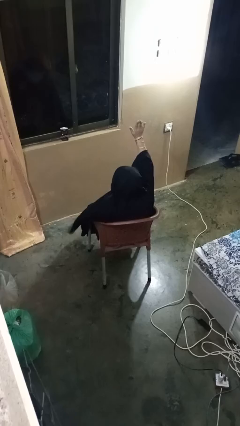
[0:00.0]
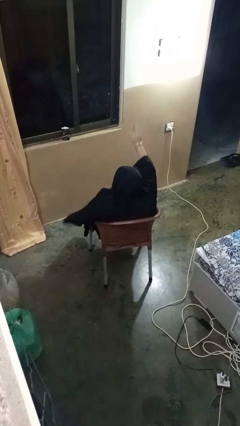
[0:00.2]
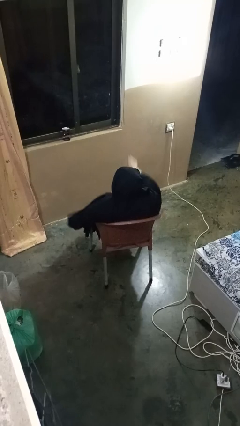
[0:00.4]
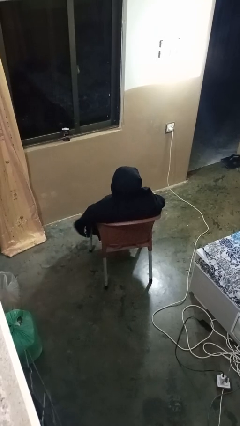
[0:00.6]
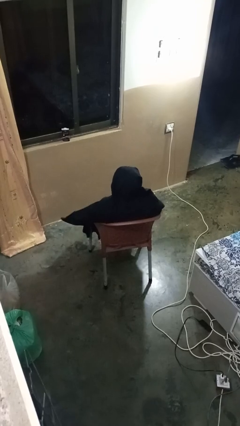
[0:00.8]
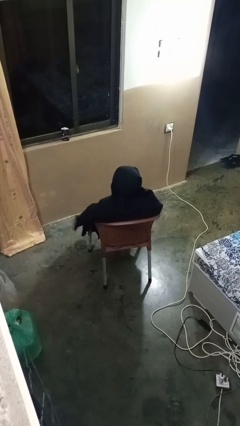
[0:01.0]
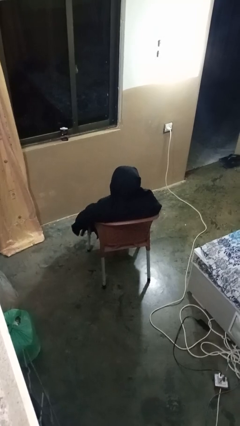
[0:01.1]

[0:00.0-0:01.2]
person gestures lower hand

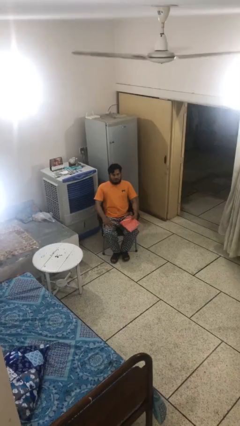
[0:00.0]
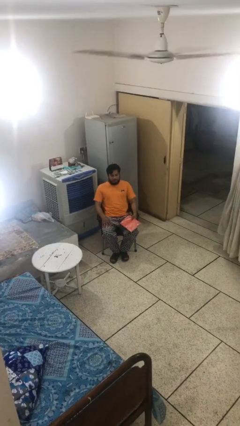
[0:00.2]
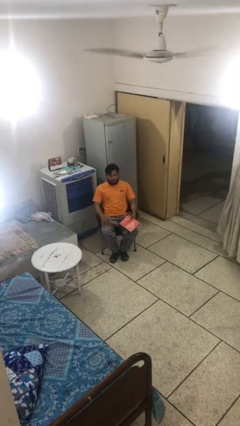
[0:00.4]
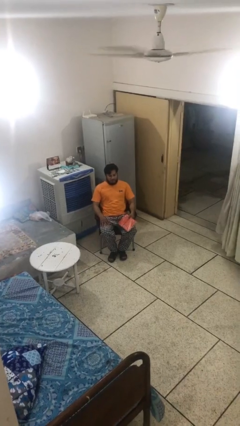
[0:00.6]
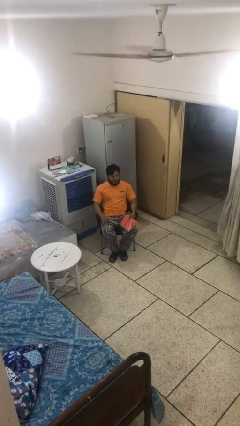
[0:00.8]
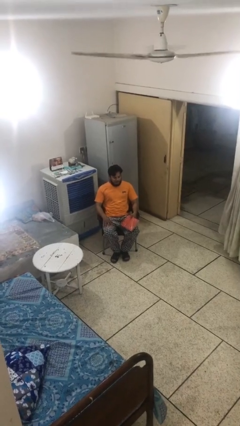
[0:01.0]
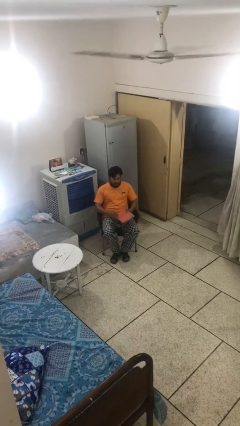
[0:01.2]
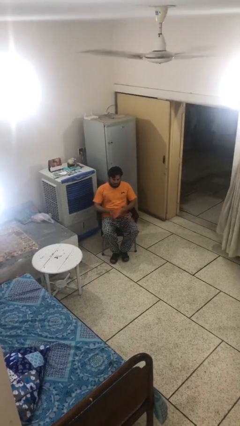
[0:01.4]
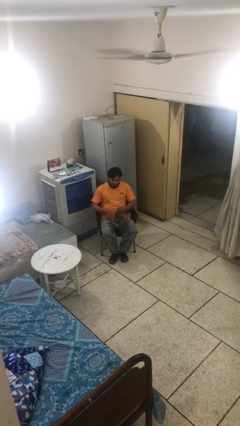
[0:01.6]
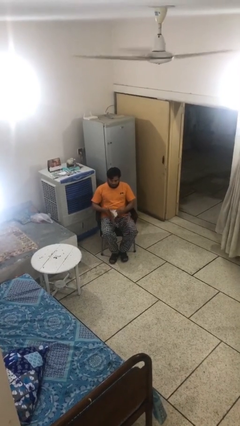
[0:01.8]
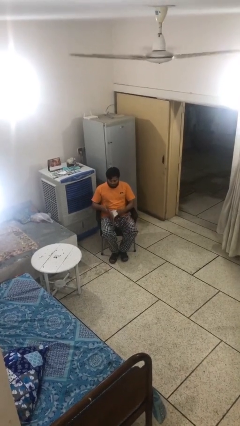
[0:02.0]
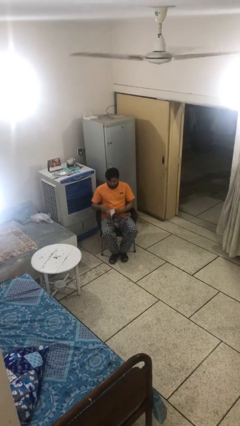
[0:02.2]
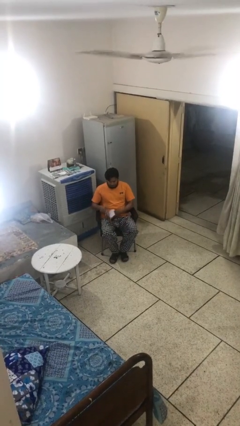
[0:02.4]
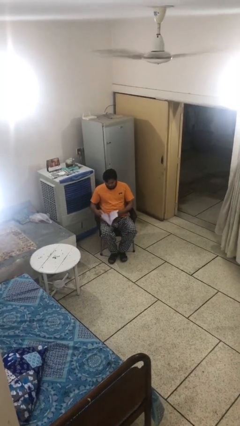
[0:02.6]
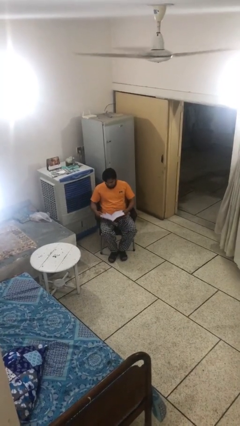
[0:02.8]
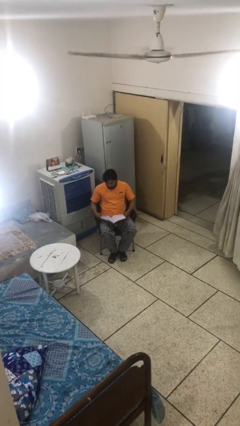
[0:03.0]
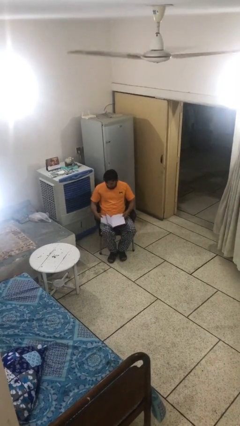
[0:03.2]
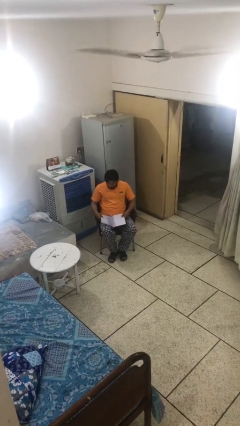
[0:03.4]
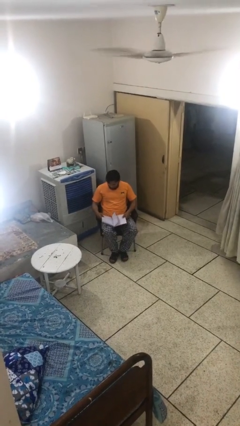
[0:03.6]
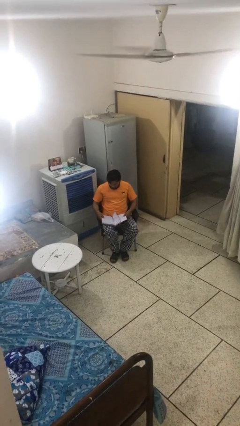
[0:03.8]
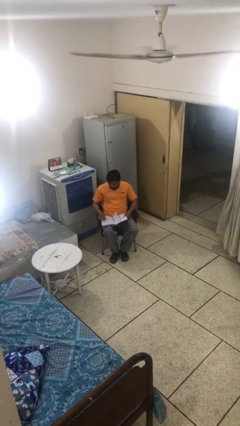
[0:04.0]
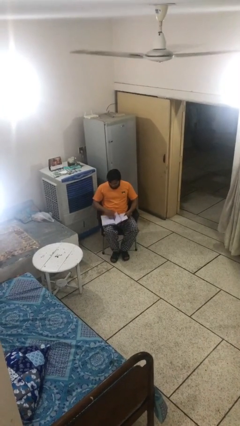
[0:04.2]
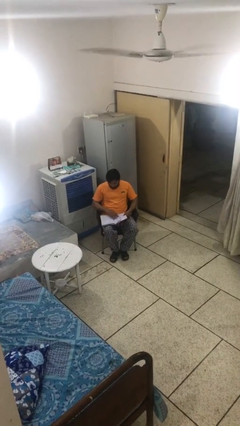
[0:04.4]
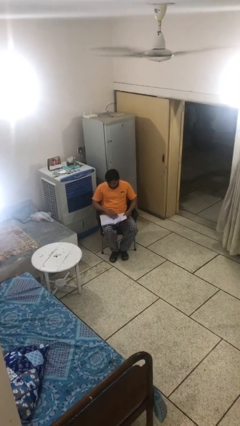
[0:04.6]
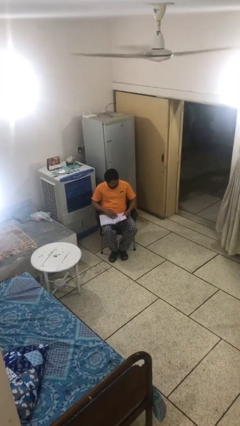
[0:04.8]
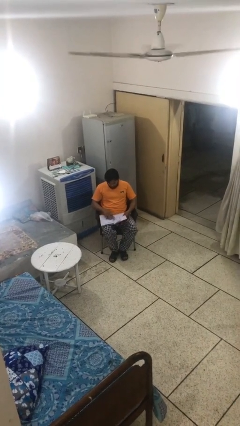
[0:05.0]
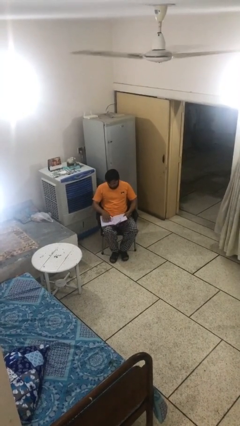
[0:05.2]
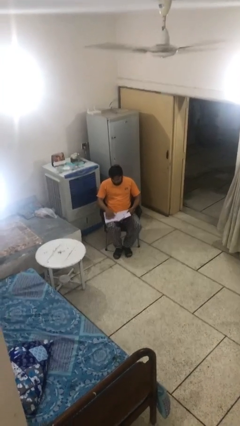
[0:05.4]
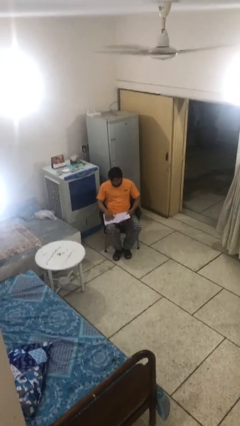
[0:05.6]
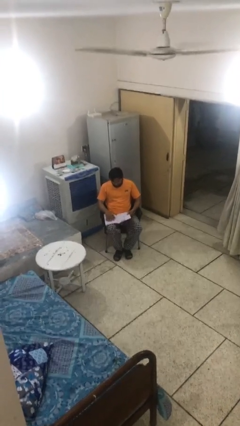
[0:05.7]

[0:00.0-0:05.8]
person reads document

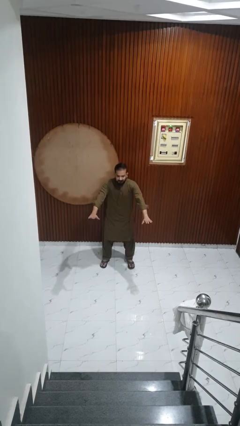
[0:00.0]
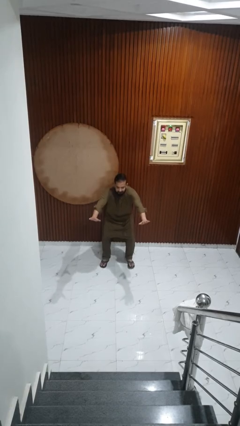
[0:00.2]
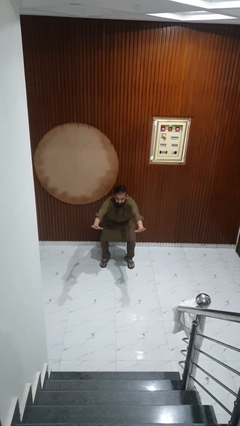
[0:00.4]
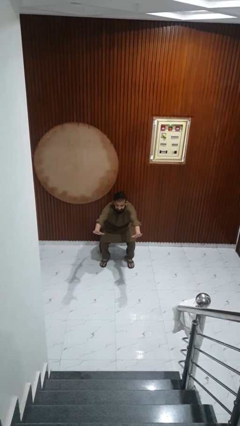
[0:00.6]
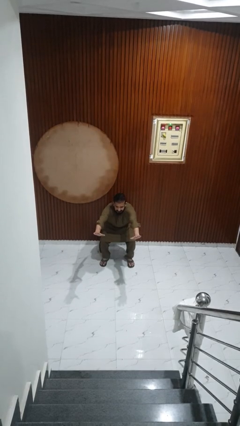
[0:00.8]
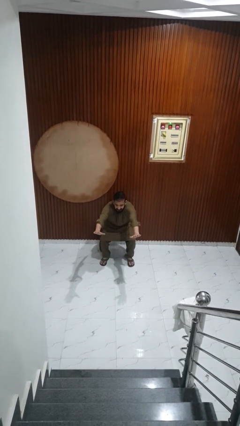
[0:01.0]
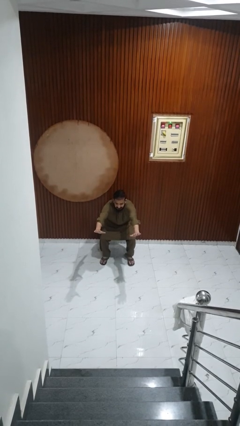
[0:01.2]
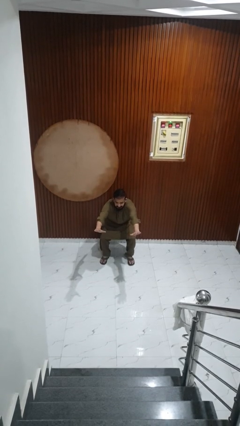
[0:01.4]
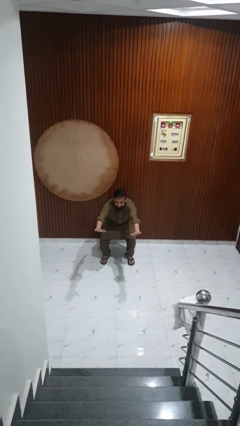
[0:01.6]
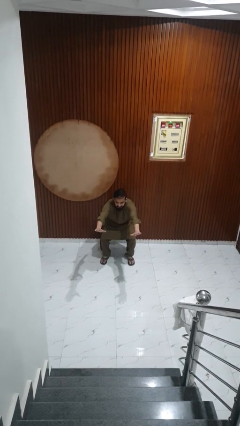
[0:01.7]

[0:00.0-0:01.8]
person squats

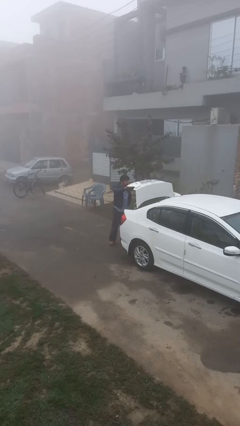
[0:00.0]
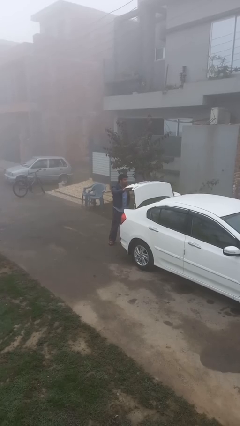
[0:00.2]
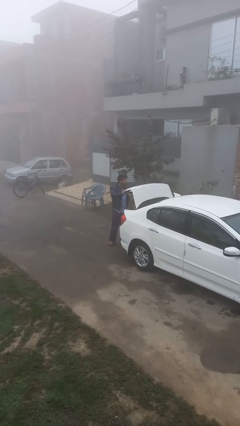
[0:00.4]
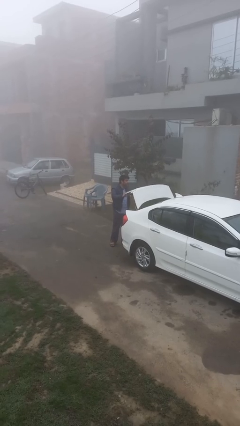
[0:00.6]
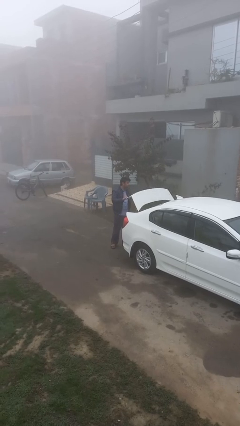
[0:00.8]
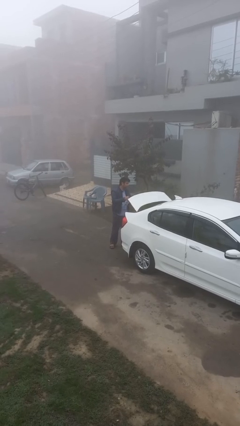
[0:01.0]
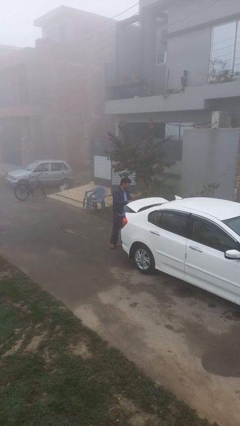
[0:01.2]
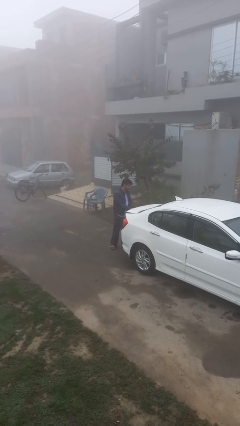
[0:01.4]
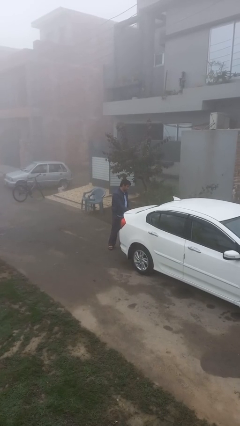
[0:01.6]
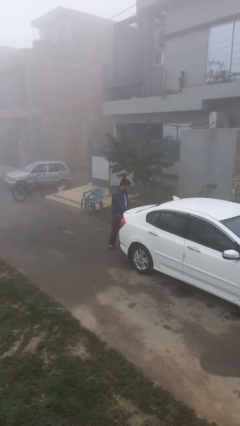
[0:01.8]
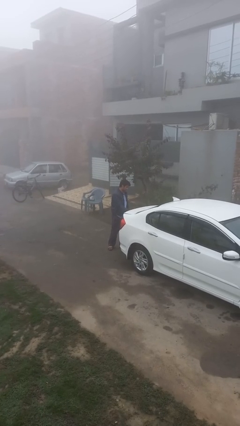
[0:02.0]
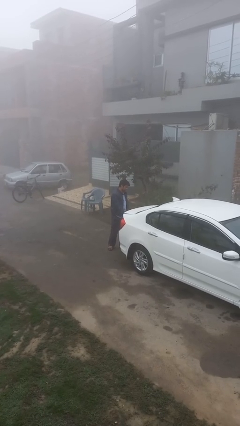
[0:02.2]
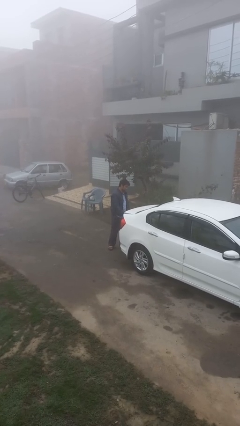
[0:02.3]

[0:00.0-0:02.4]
person closes car trunk

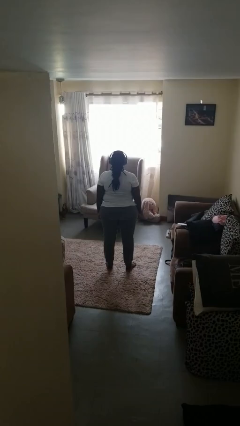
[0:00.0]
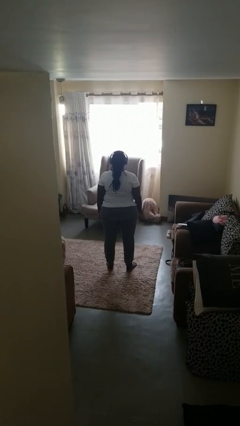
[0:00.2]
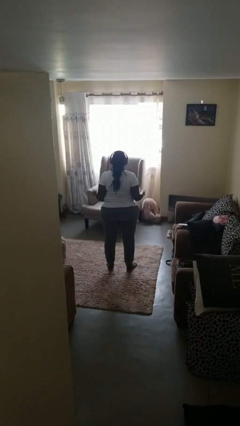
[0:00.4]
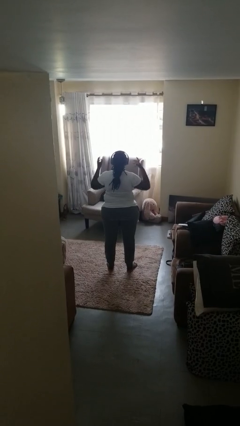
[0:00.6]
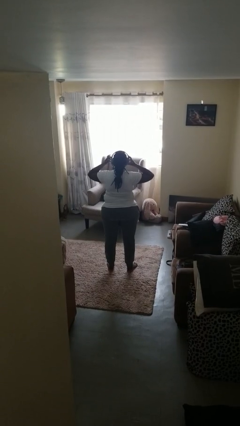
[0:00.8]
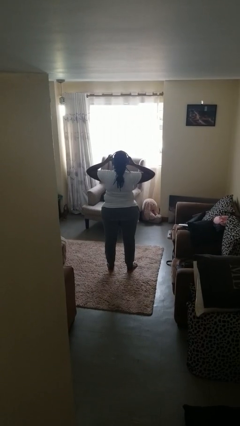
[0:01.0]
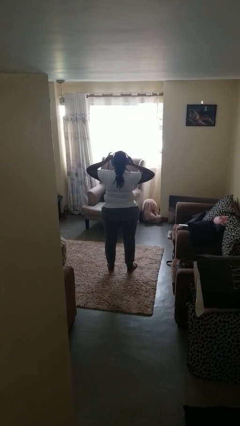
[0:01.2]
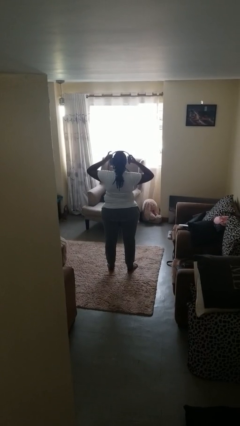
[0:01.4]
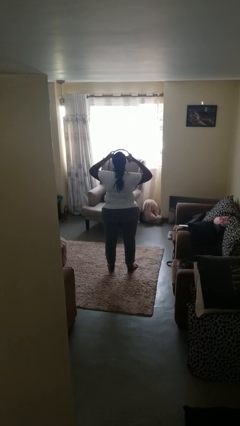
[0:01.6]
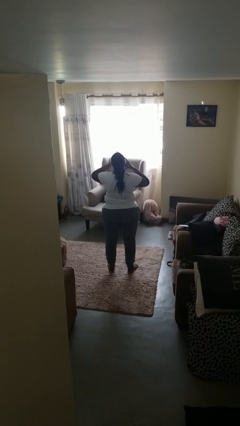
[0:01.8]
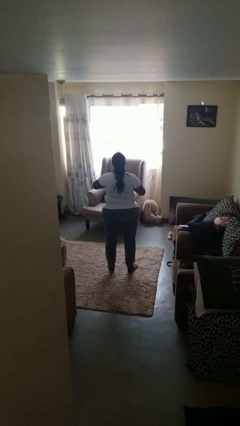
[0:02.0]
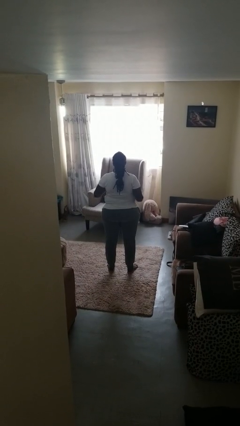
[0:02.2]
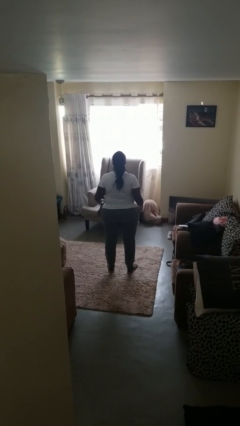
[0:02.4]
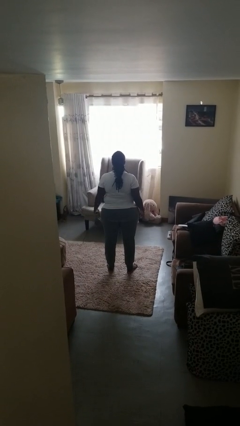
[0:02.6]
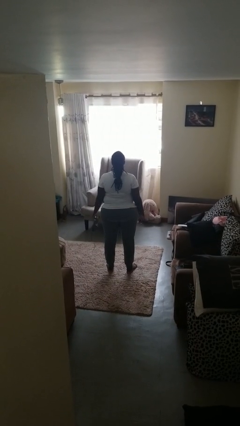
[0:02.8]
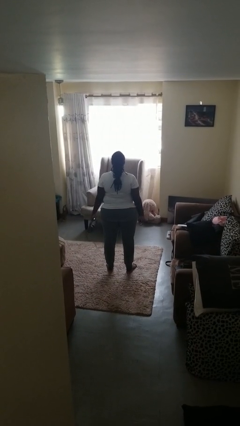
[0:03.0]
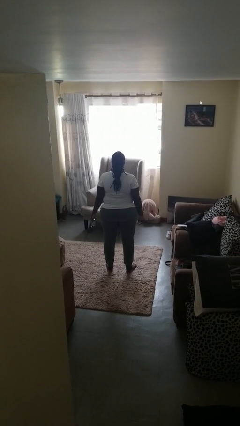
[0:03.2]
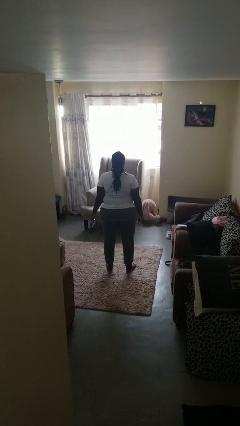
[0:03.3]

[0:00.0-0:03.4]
person takes off headphones

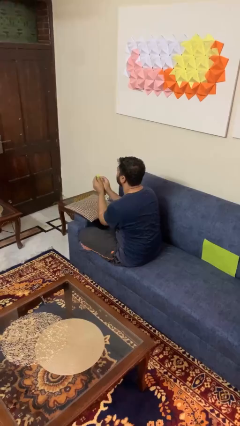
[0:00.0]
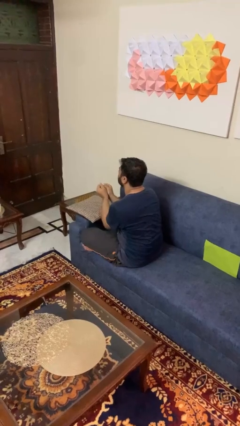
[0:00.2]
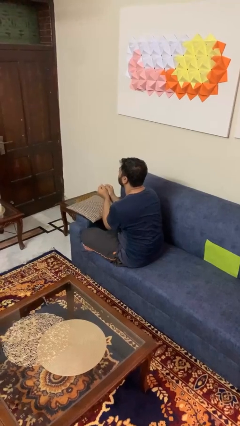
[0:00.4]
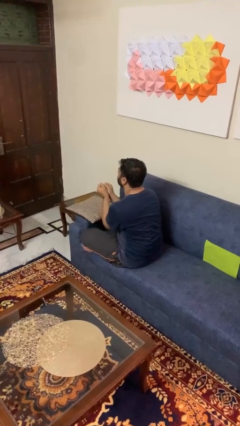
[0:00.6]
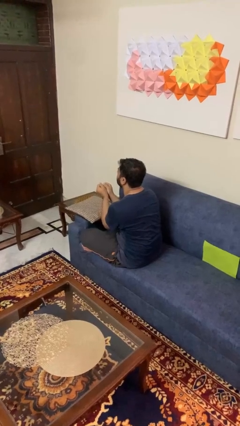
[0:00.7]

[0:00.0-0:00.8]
person crumples paper

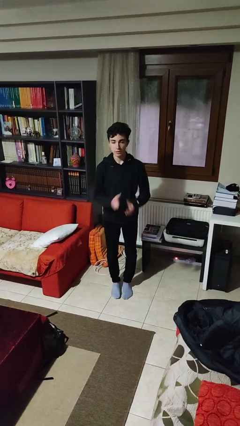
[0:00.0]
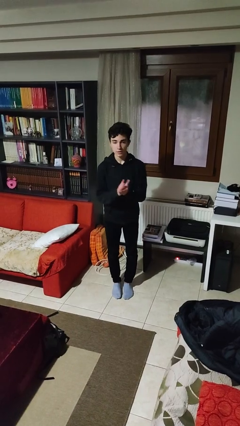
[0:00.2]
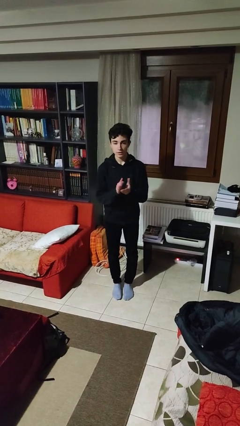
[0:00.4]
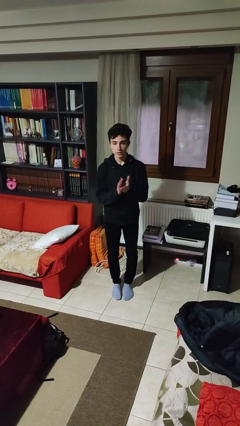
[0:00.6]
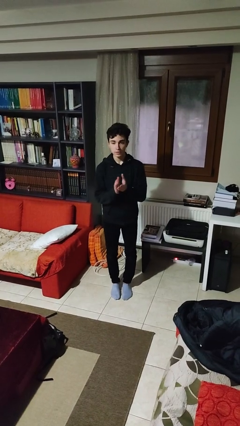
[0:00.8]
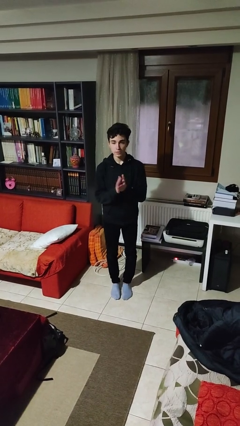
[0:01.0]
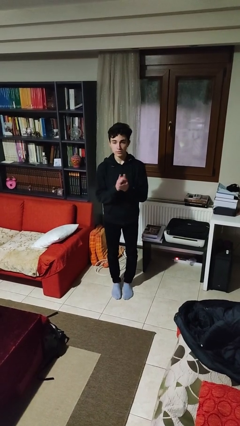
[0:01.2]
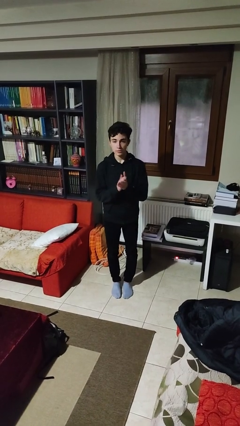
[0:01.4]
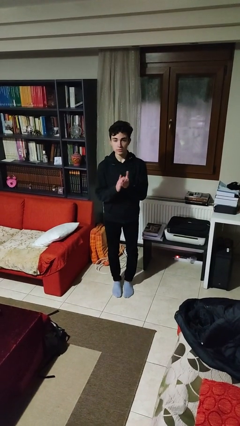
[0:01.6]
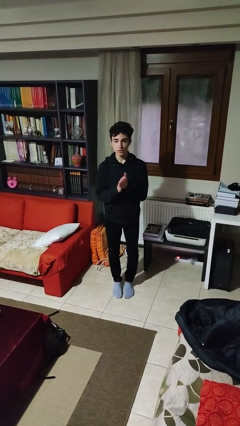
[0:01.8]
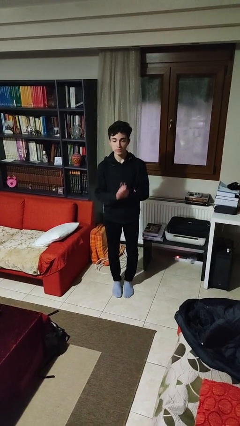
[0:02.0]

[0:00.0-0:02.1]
person claps hands
